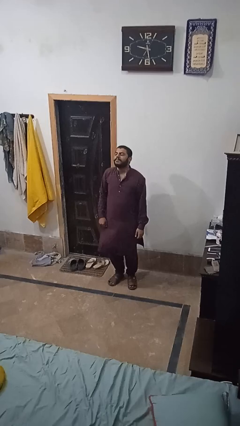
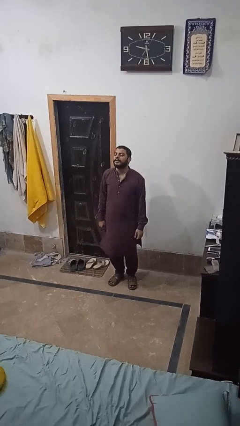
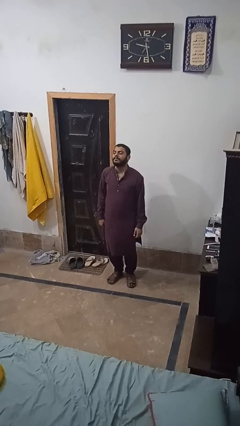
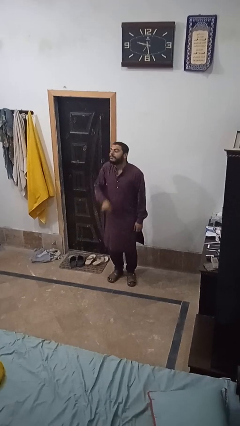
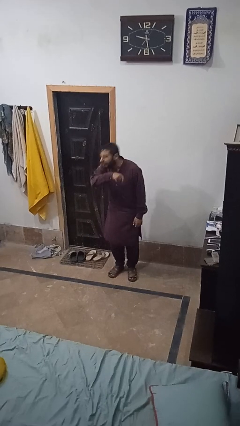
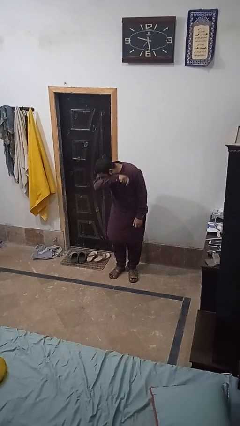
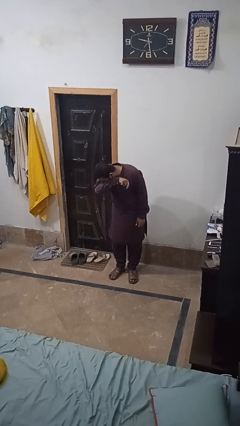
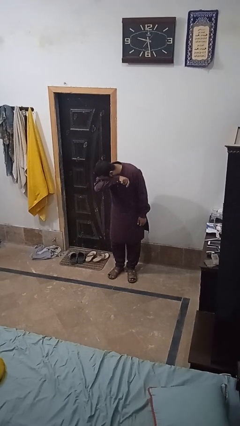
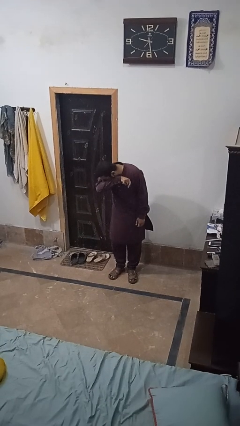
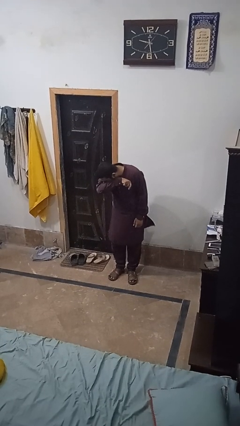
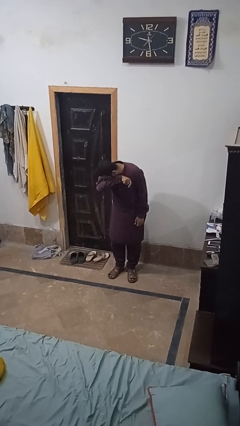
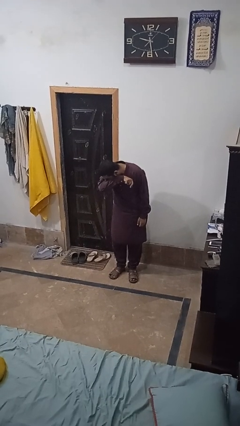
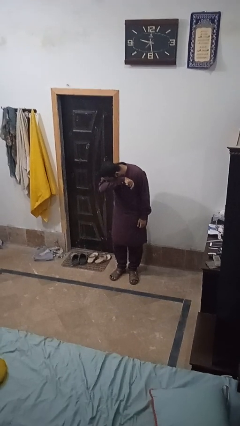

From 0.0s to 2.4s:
person sneezes into arm

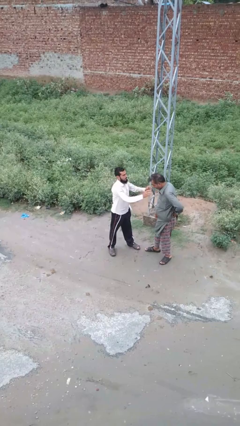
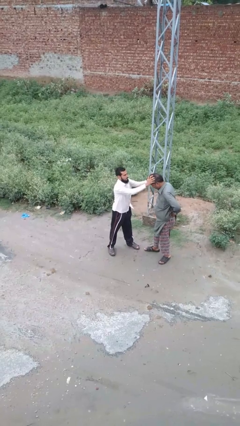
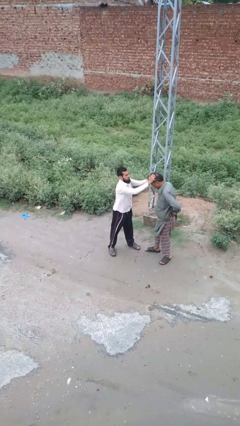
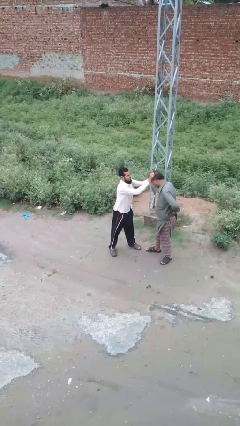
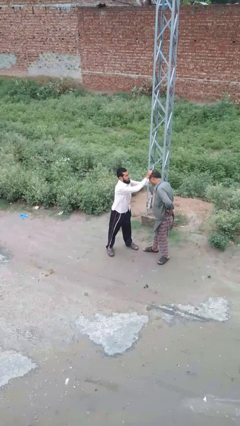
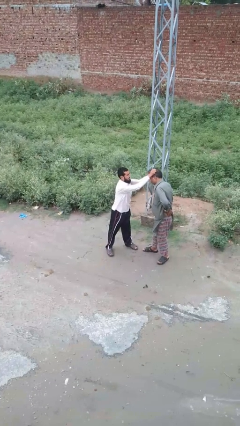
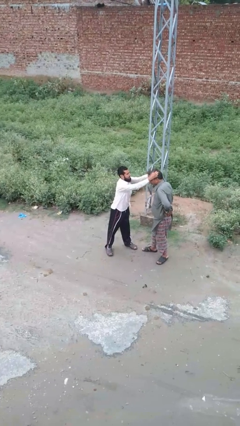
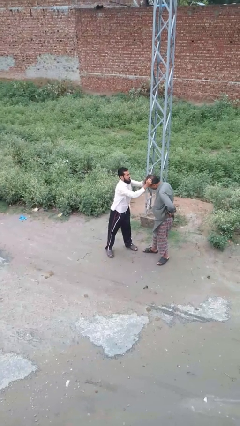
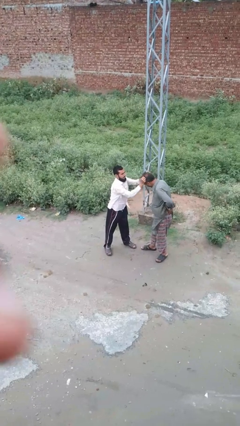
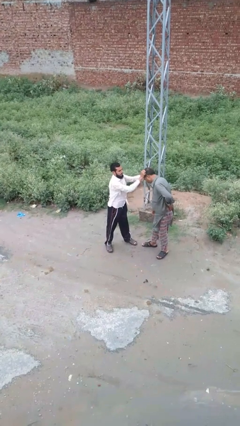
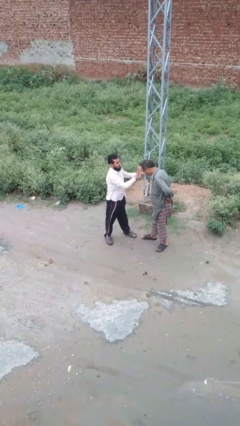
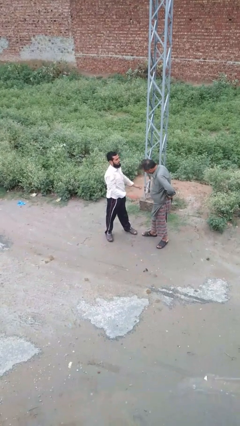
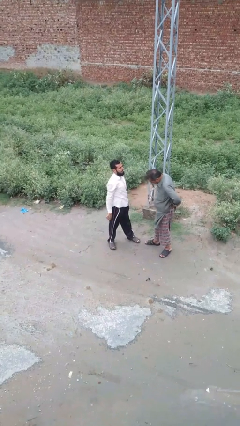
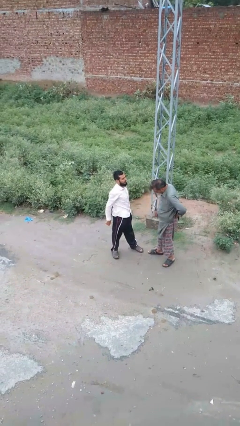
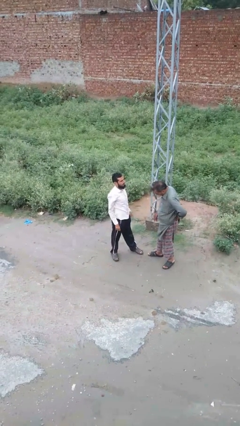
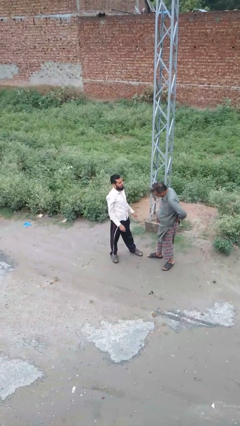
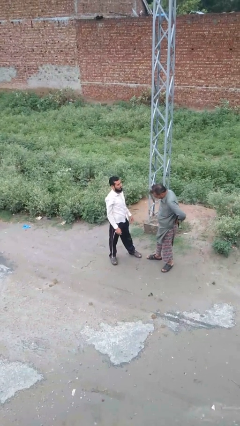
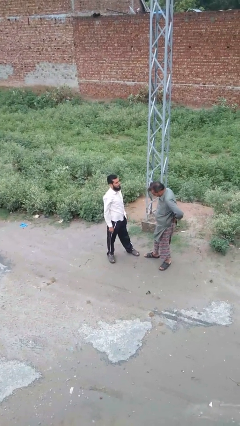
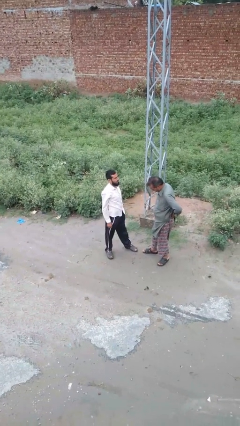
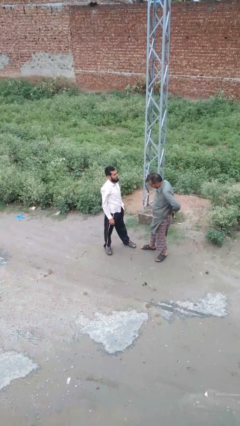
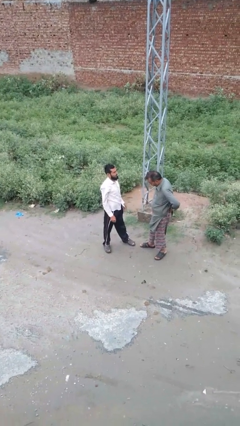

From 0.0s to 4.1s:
person grabs person by hair

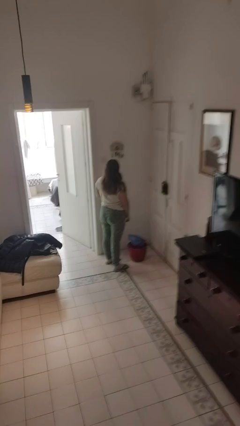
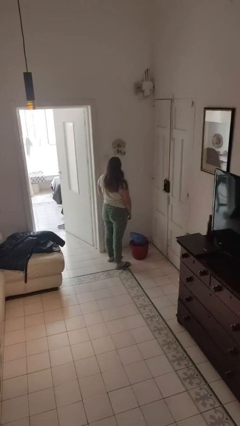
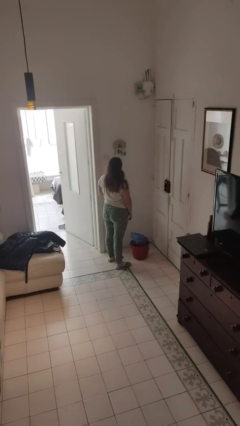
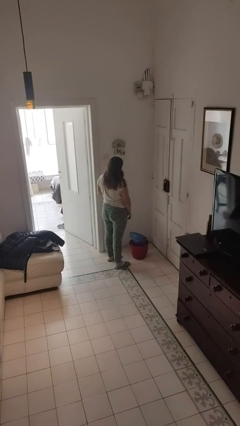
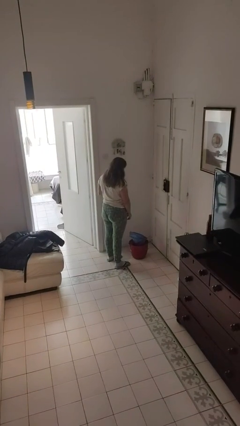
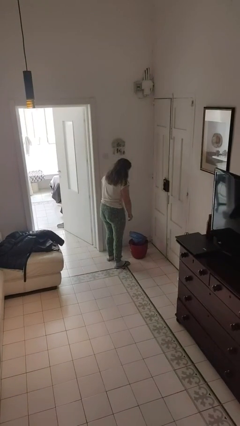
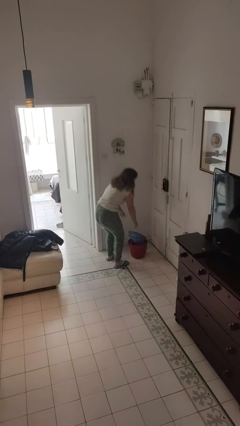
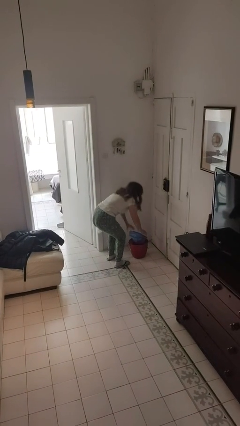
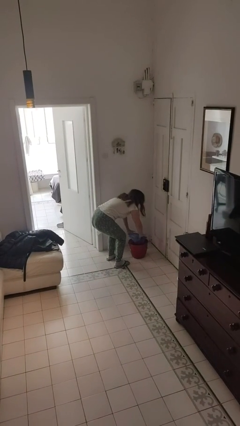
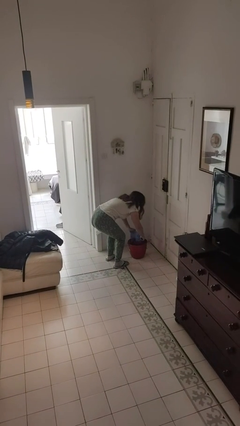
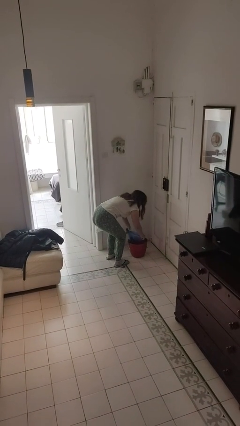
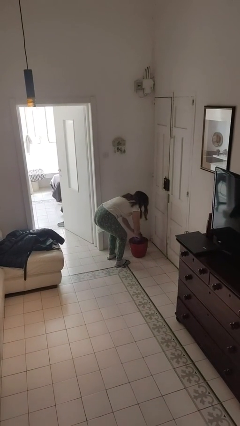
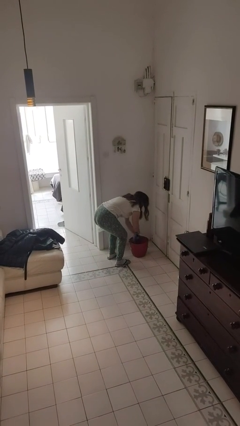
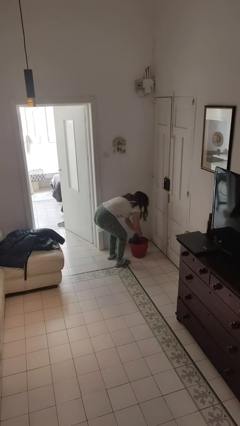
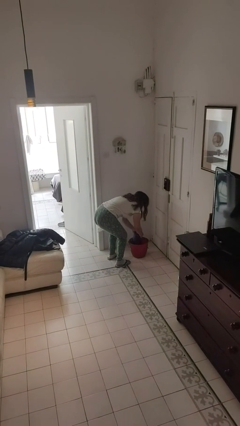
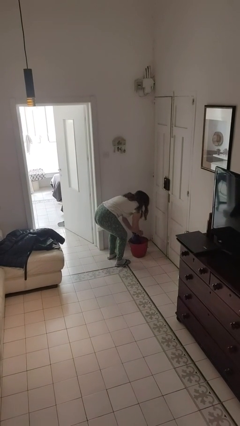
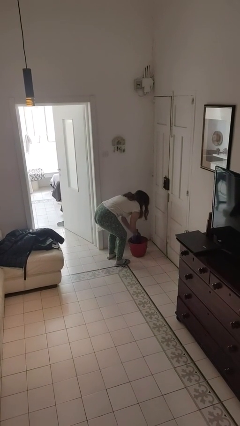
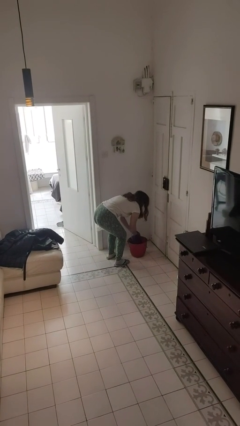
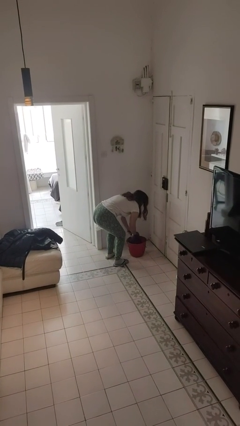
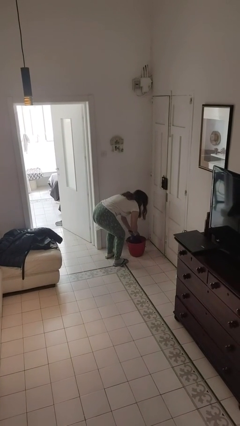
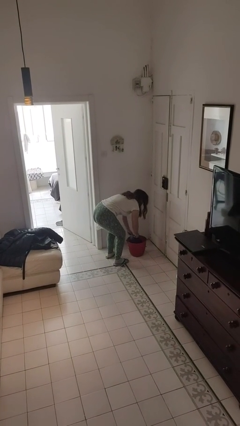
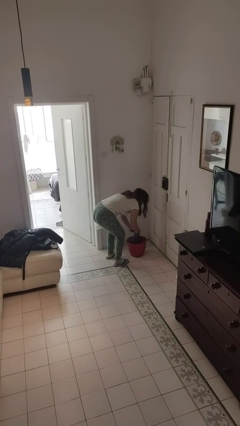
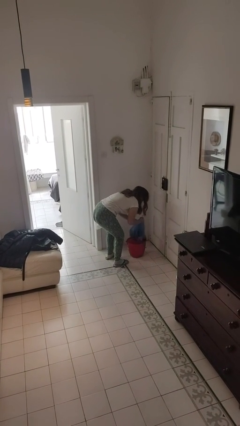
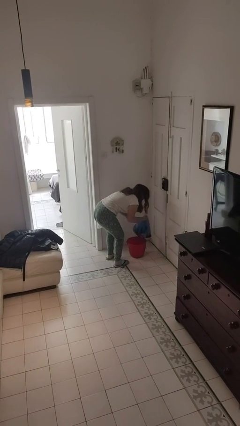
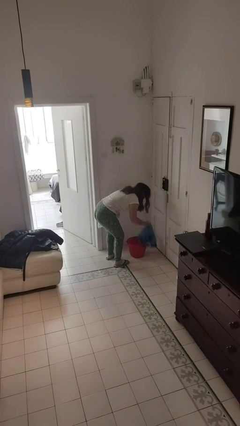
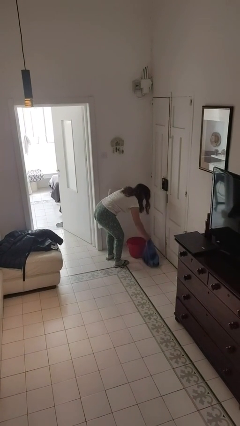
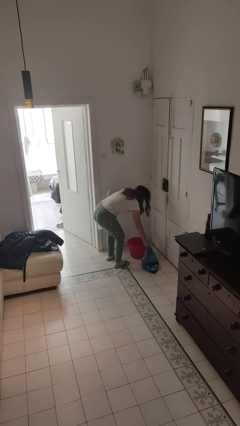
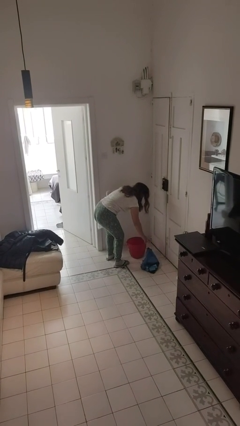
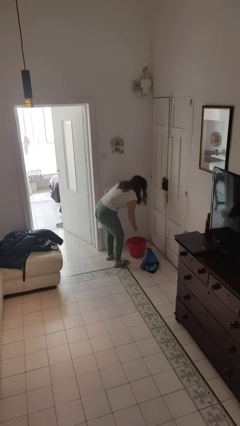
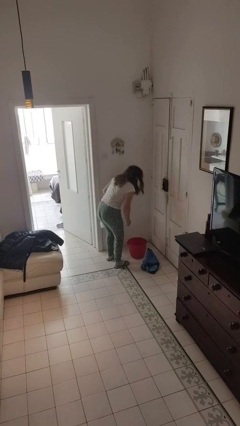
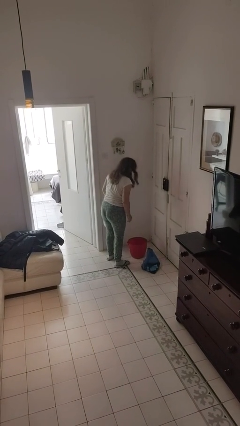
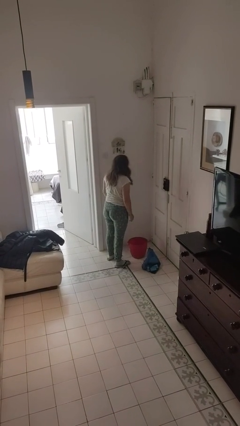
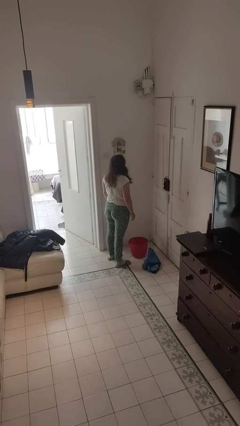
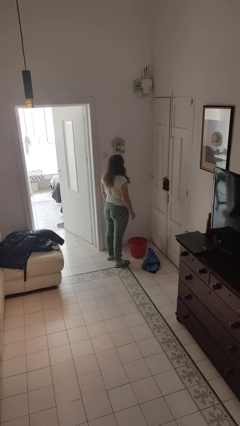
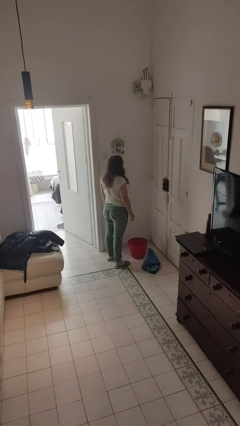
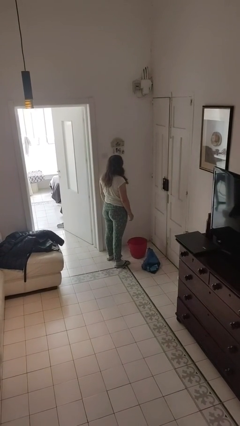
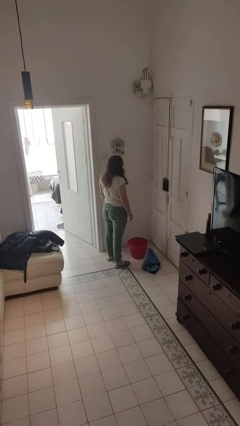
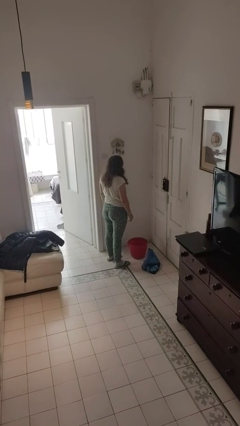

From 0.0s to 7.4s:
person removes trashbag from trashcan

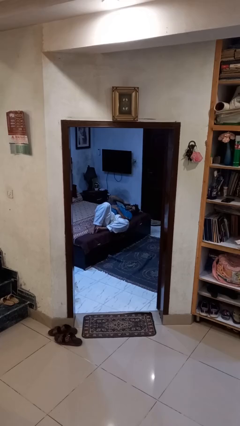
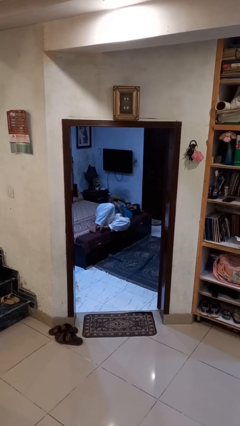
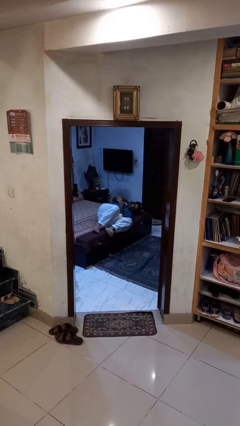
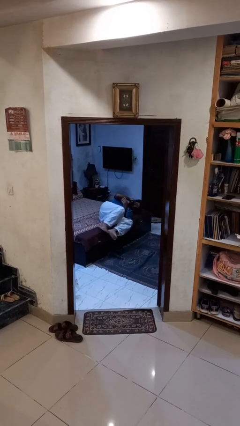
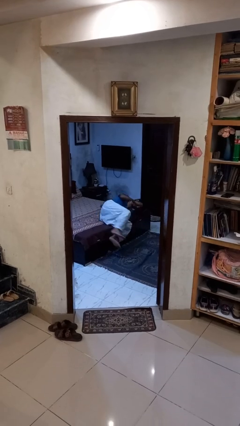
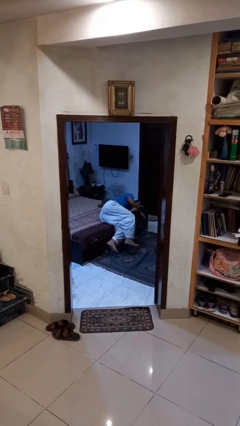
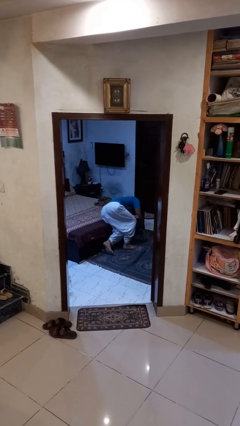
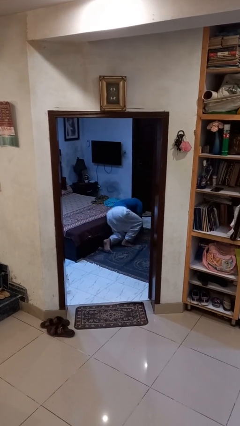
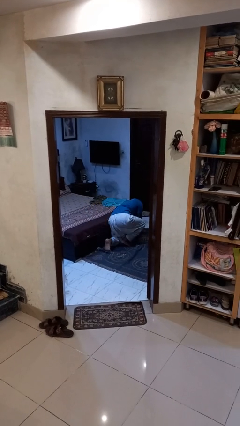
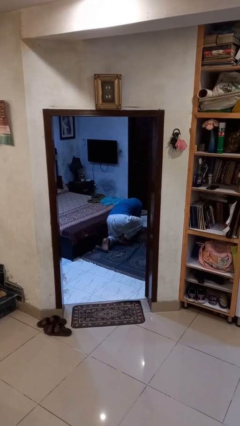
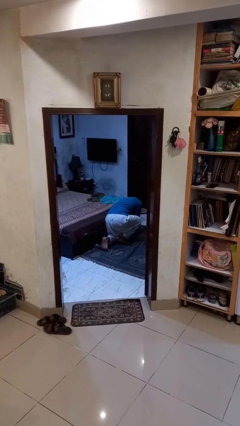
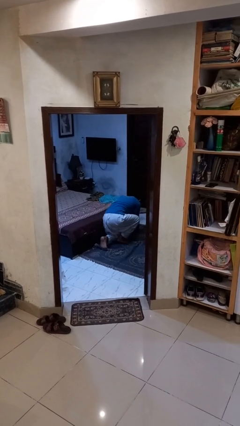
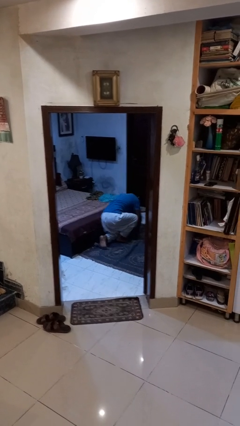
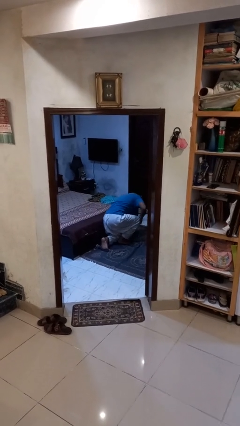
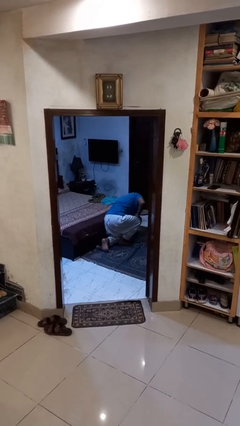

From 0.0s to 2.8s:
person falls from bed

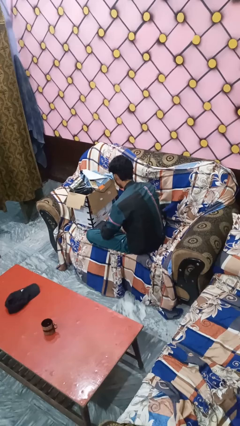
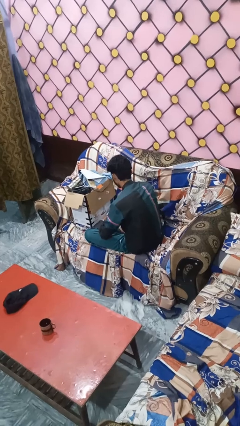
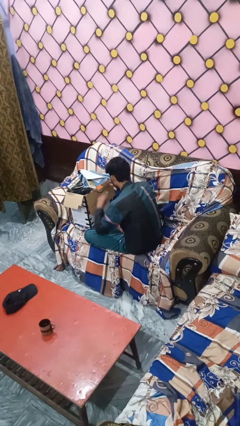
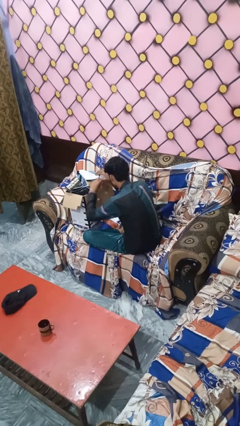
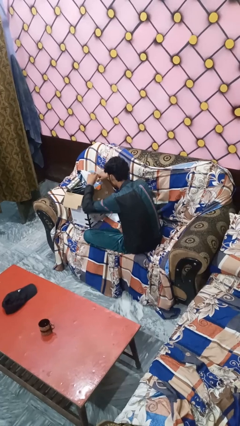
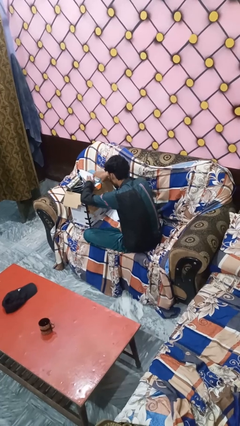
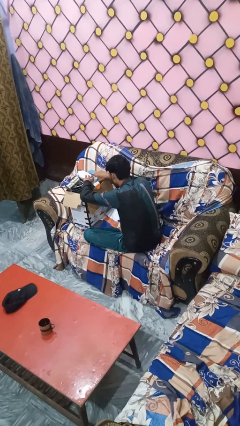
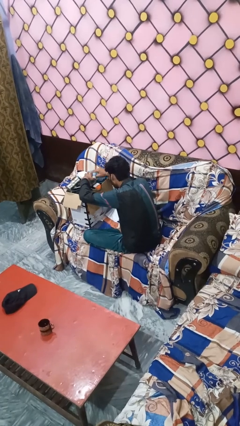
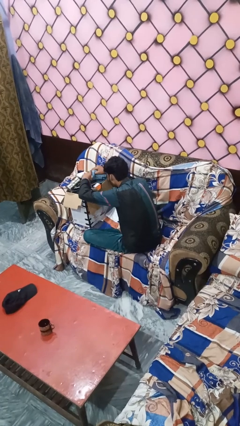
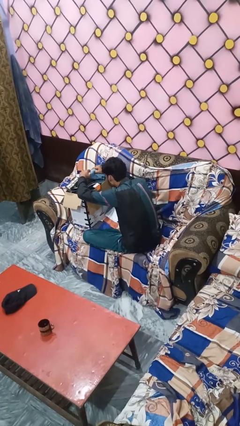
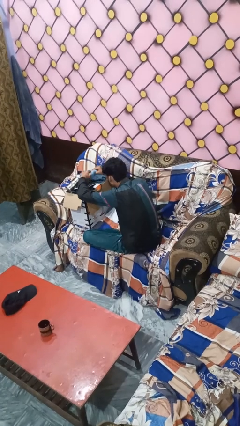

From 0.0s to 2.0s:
person searches in box
